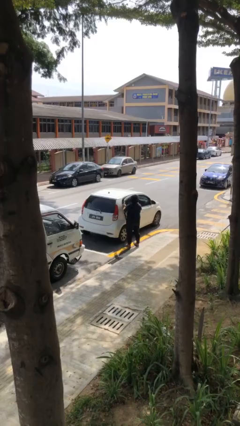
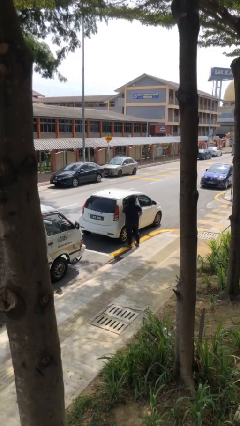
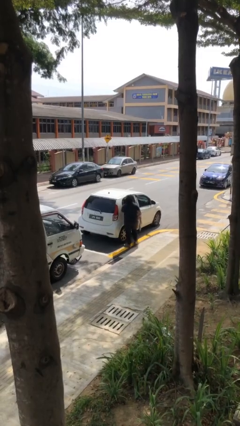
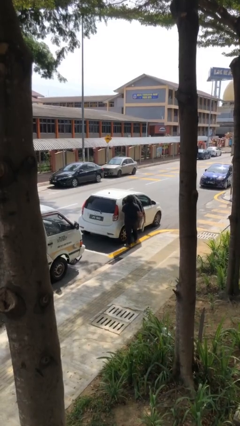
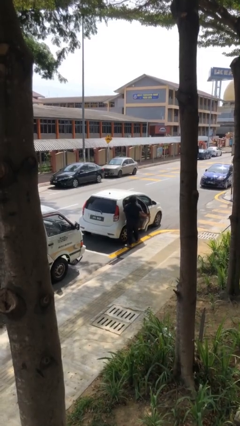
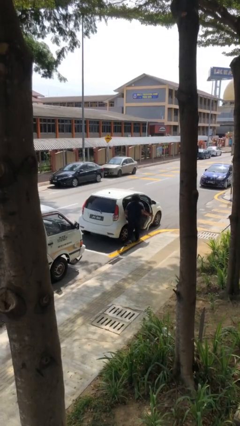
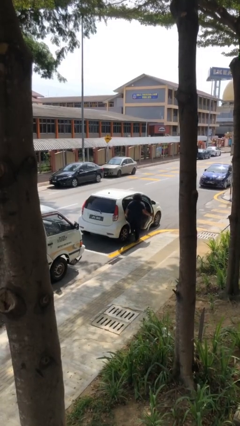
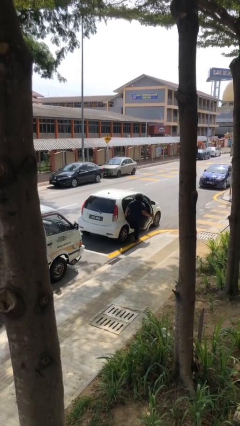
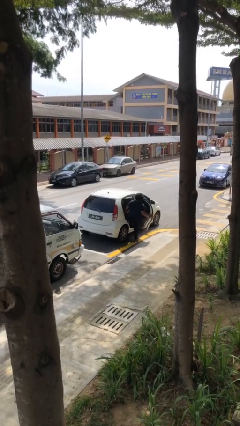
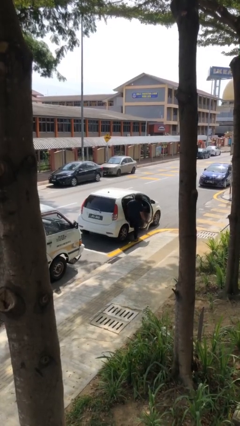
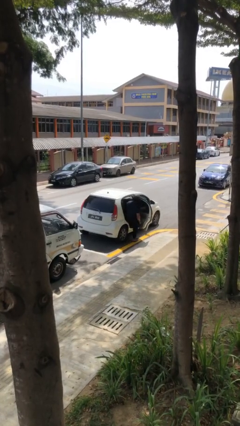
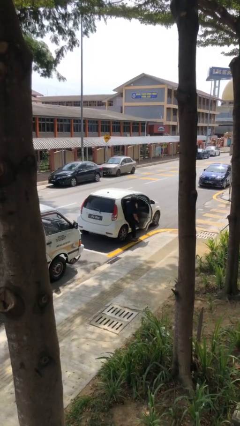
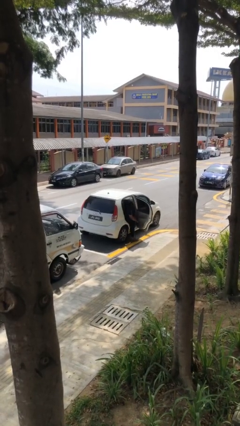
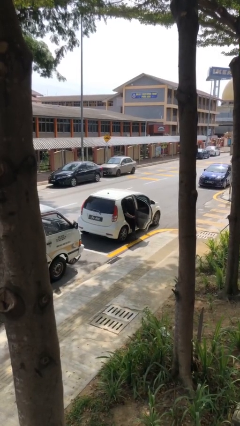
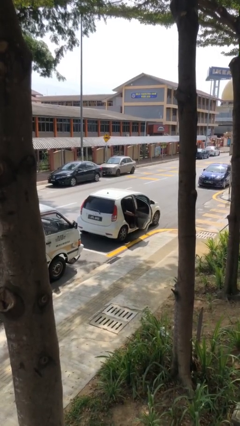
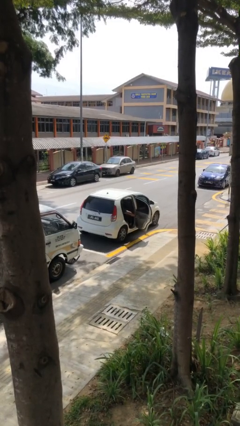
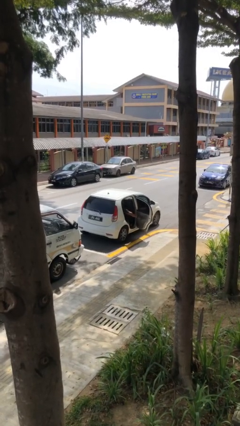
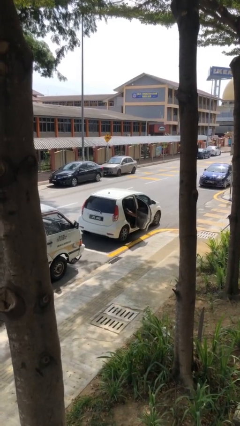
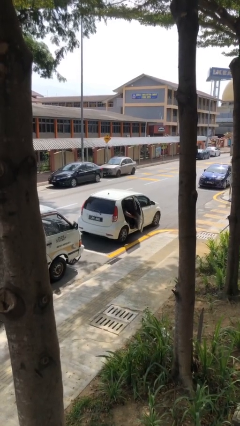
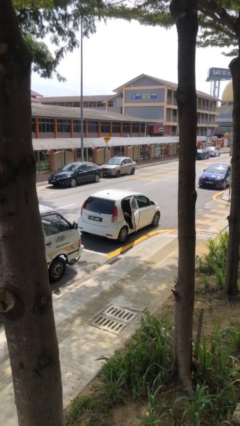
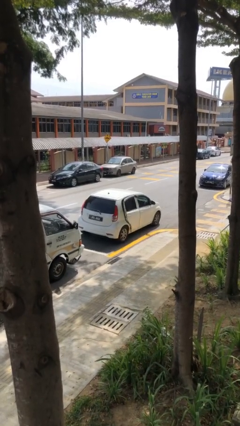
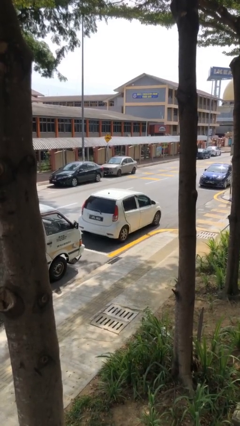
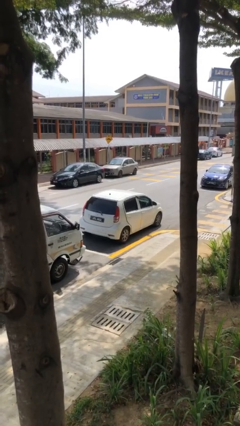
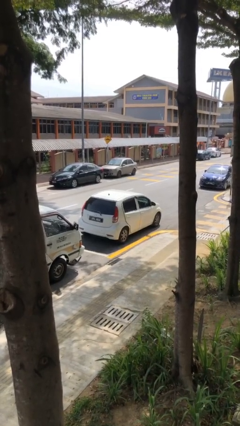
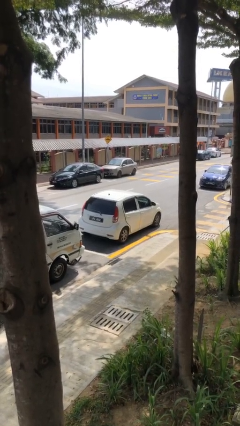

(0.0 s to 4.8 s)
car picks up person

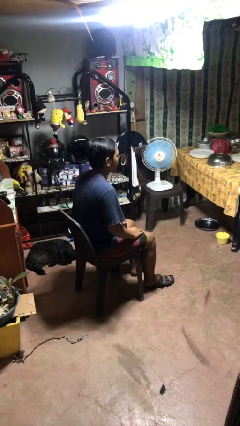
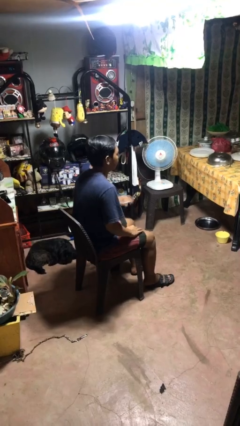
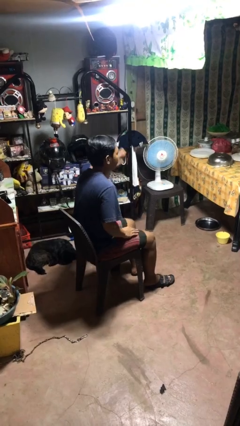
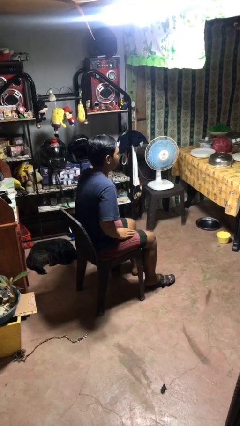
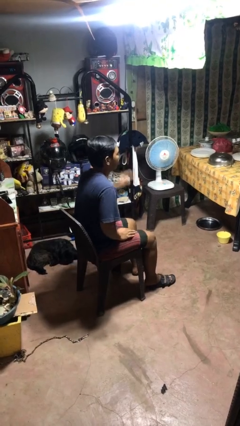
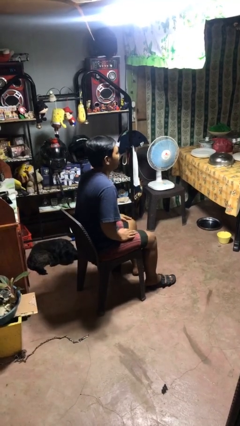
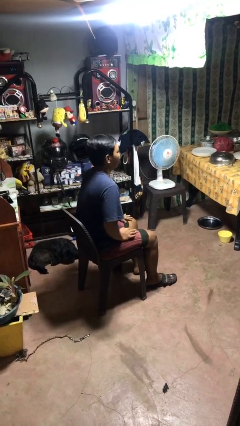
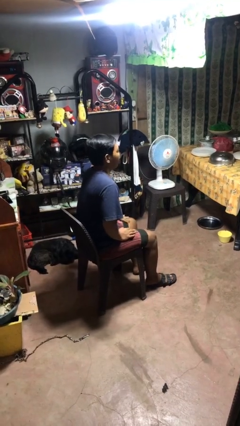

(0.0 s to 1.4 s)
person slaps hands on thighs

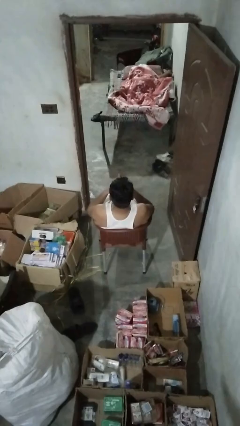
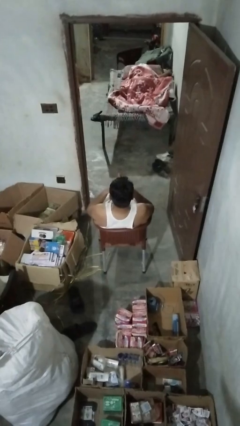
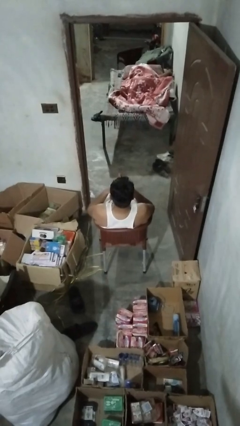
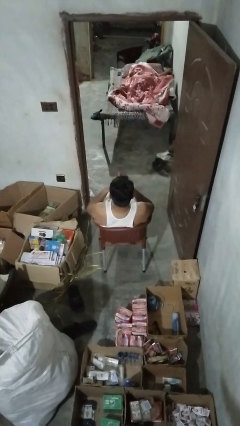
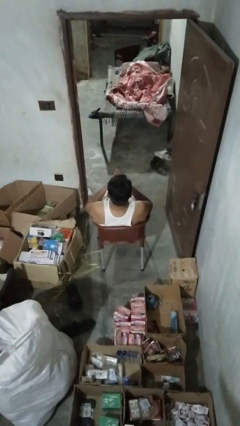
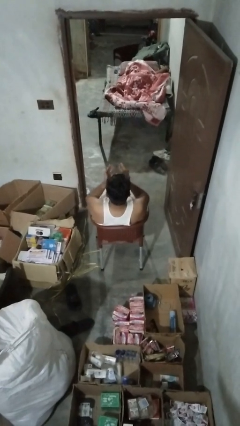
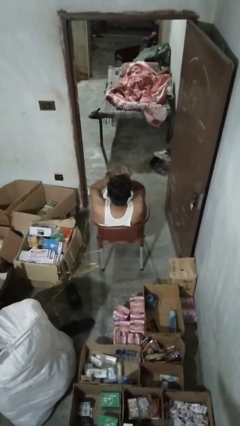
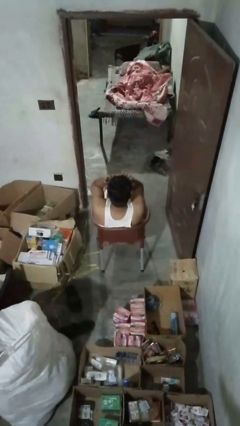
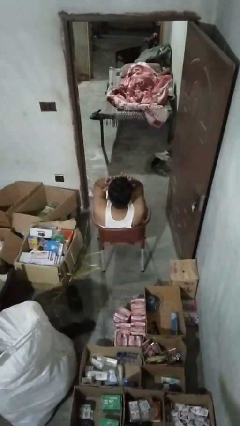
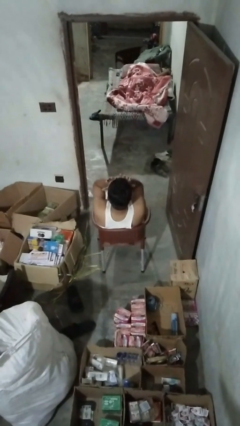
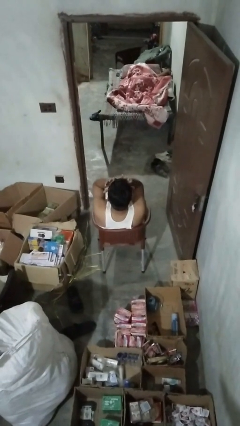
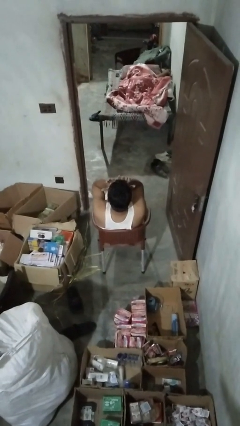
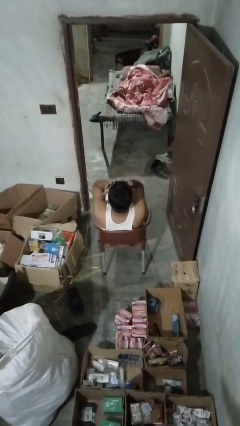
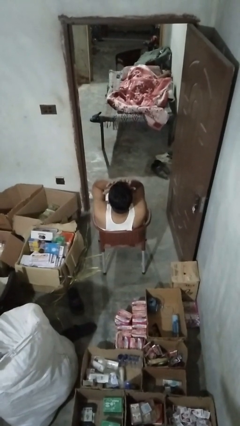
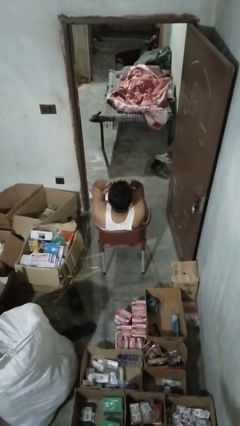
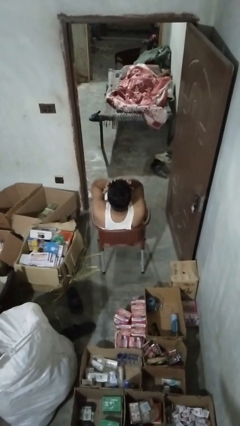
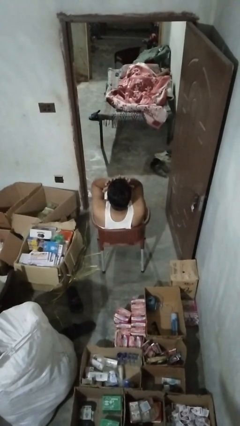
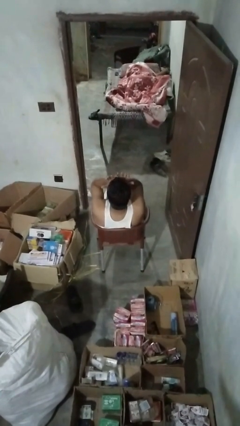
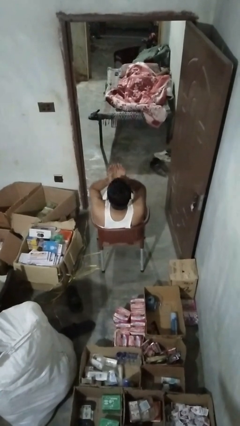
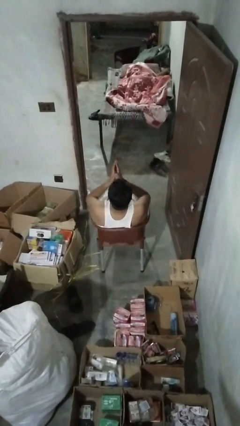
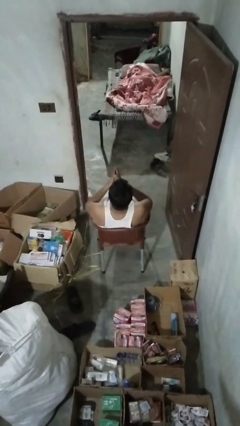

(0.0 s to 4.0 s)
person rubs eyes

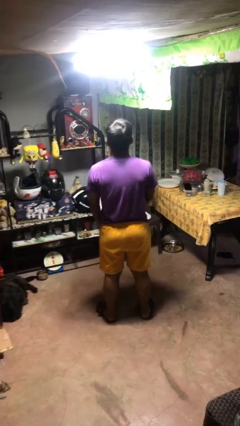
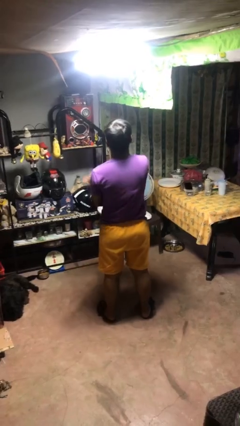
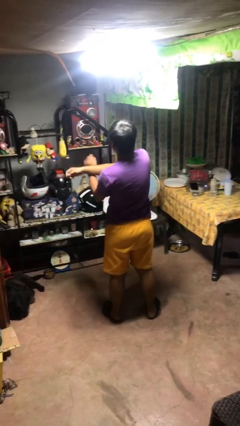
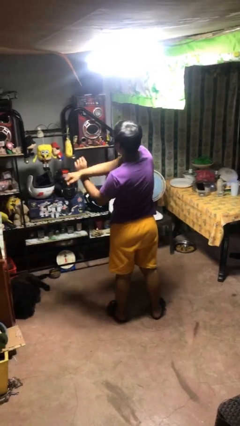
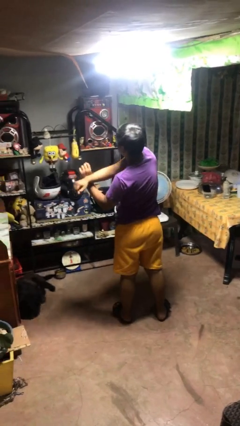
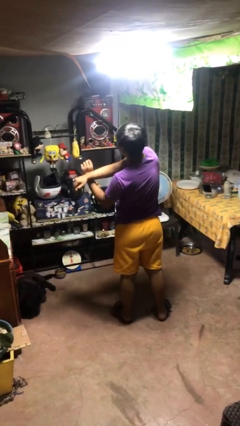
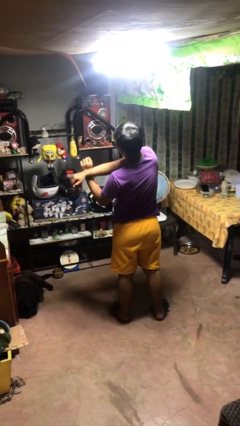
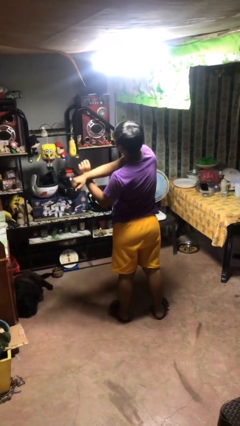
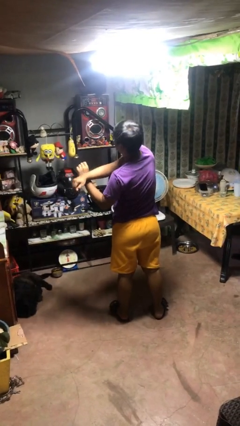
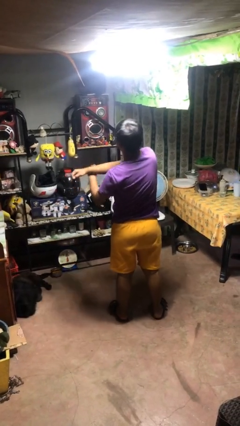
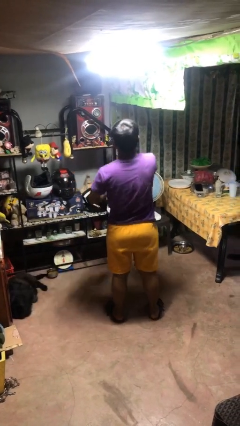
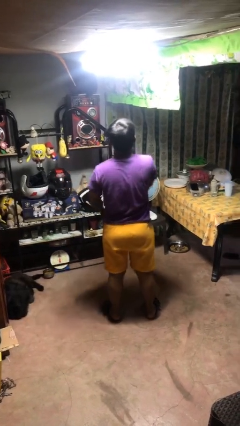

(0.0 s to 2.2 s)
person crosses arms

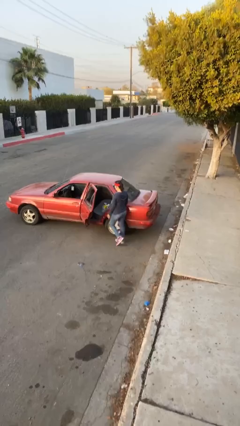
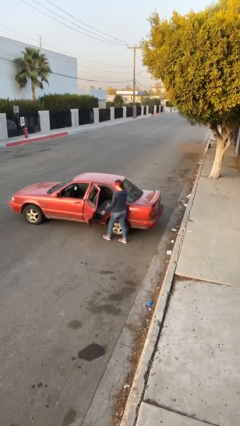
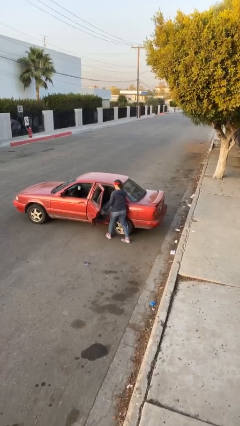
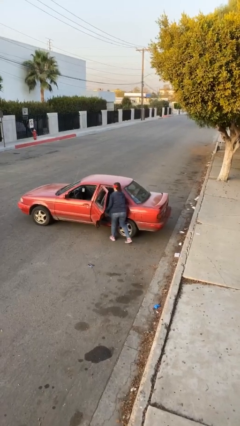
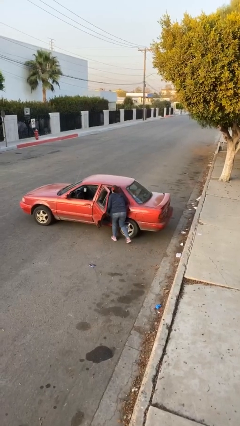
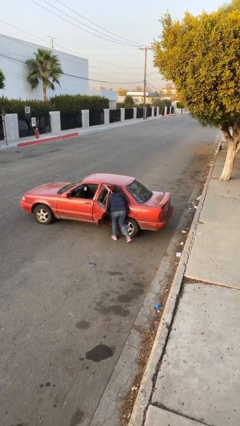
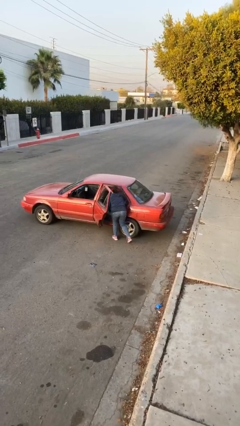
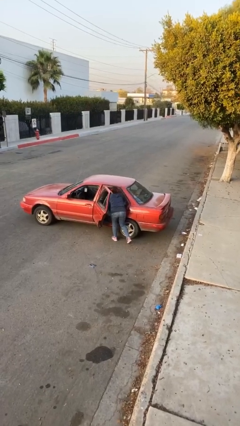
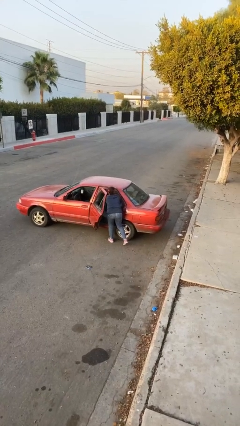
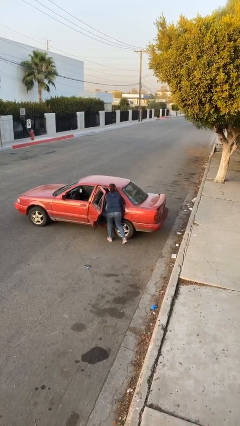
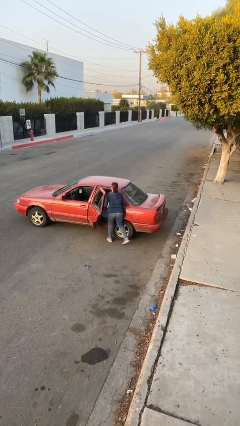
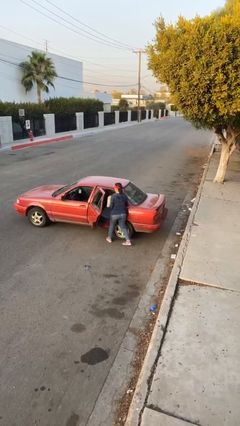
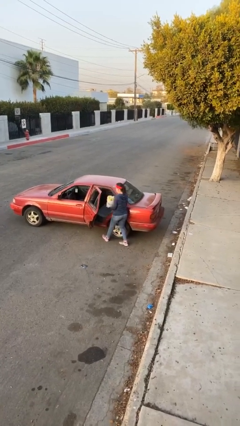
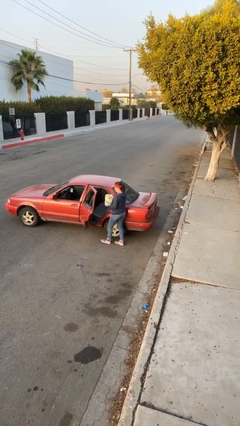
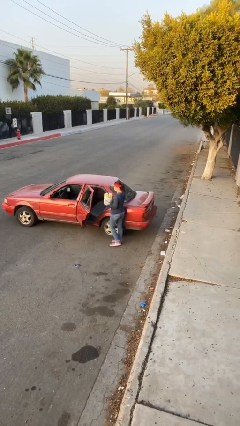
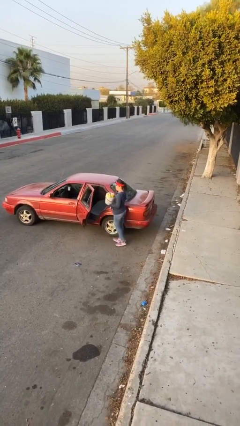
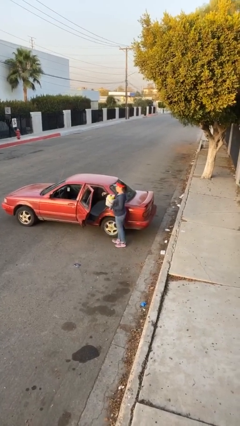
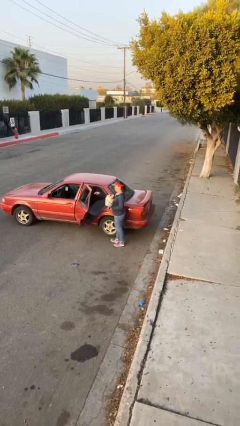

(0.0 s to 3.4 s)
person unloads car

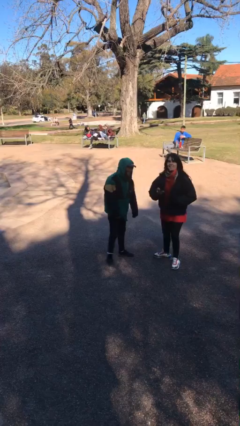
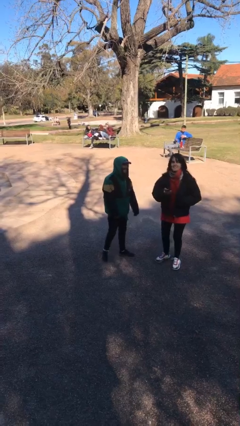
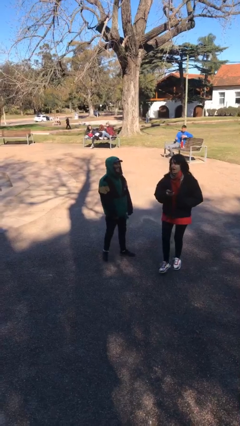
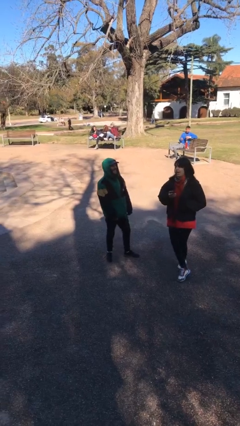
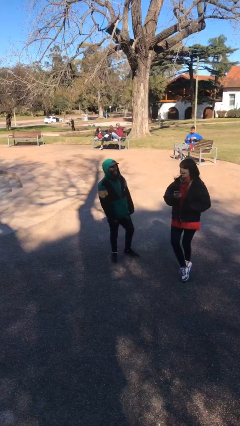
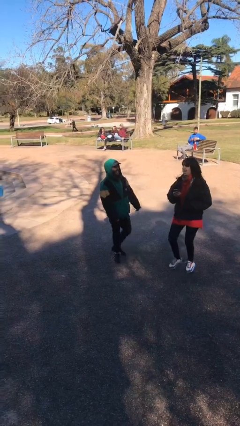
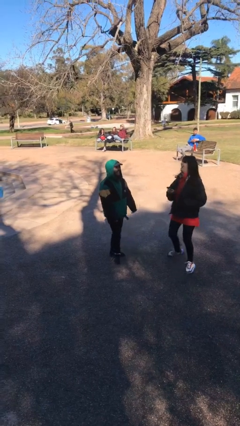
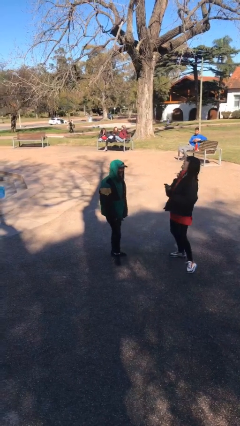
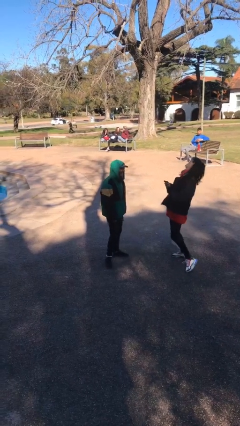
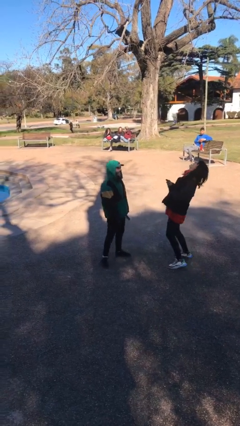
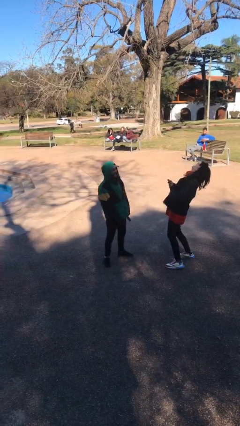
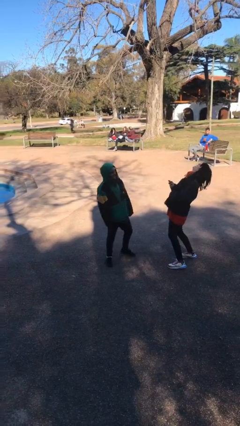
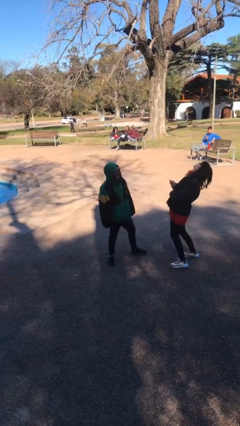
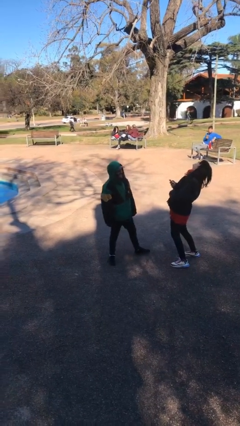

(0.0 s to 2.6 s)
person laughs with person
